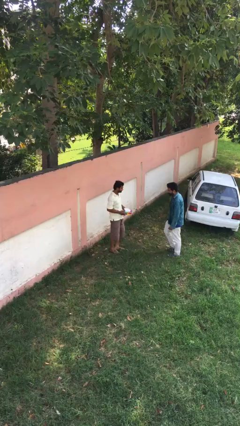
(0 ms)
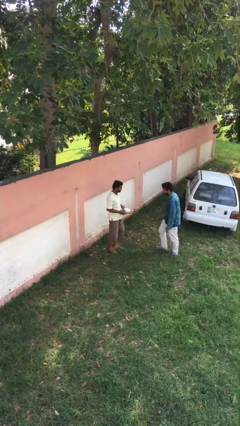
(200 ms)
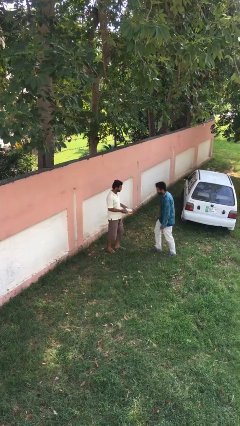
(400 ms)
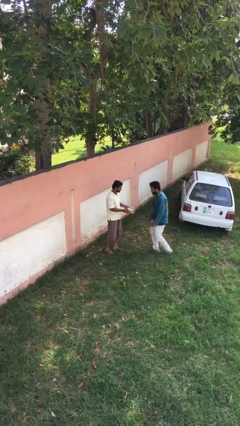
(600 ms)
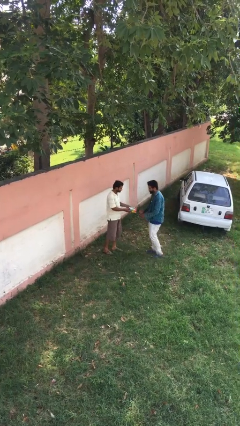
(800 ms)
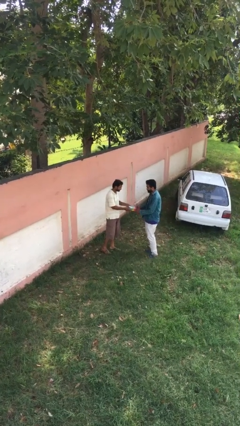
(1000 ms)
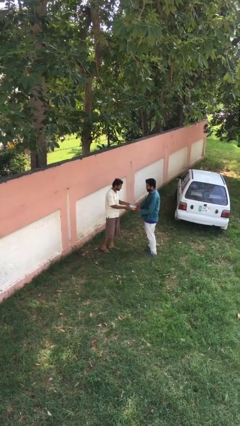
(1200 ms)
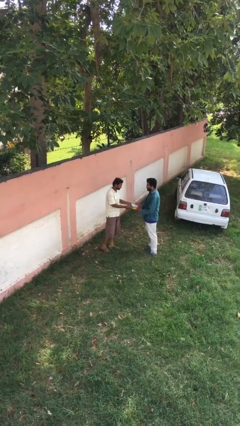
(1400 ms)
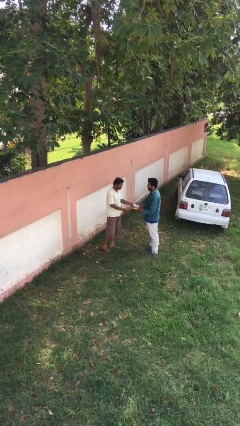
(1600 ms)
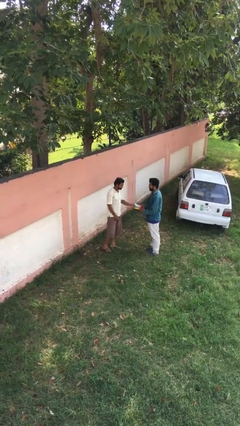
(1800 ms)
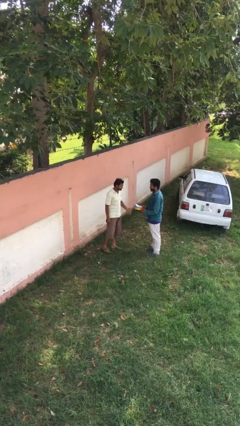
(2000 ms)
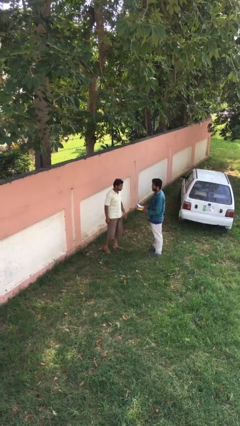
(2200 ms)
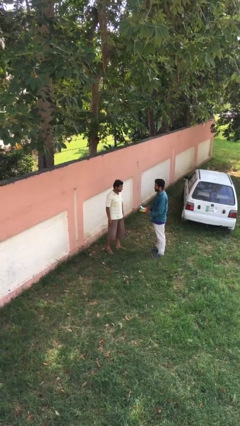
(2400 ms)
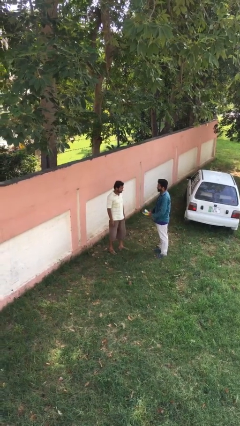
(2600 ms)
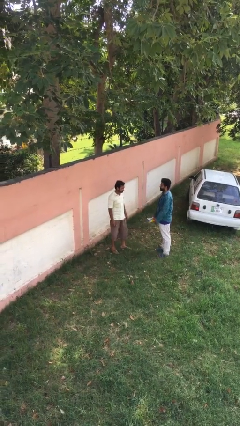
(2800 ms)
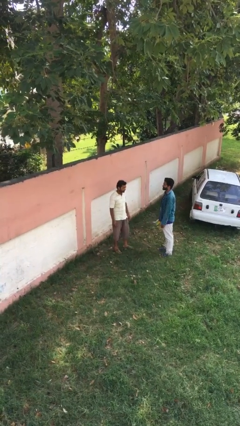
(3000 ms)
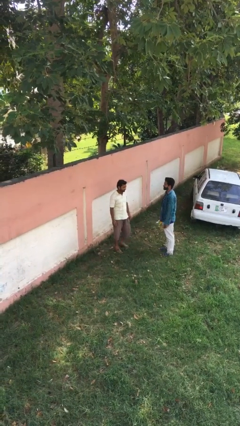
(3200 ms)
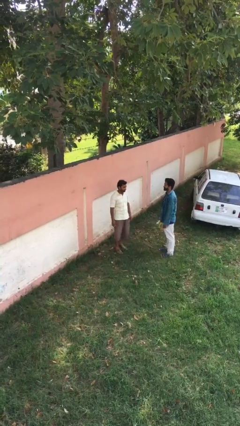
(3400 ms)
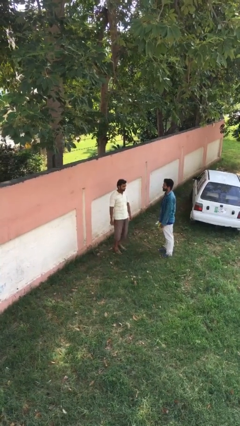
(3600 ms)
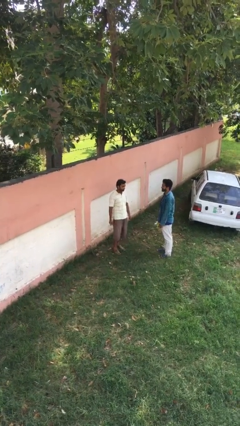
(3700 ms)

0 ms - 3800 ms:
person transfers object to person

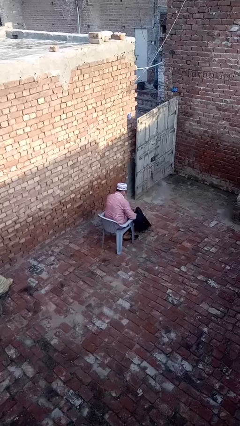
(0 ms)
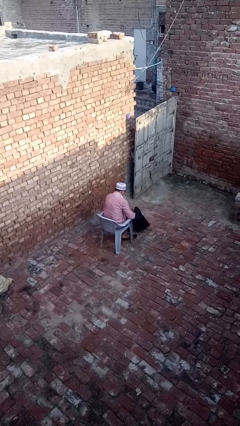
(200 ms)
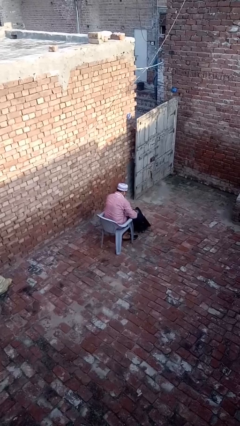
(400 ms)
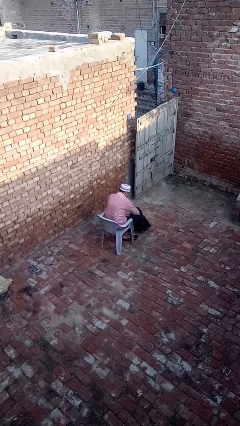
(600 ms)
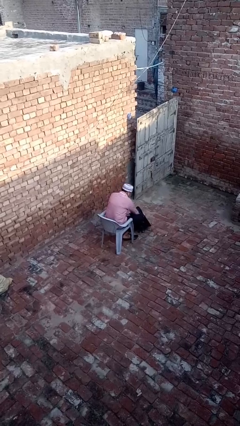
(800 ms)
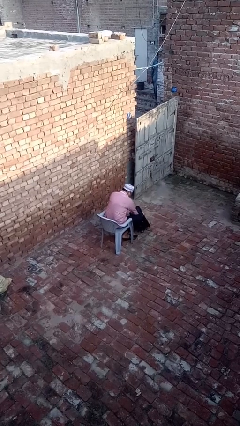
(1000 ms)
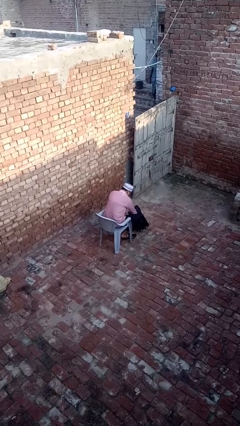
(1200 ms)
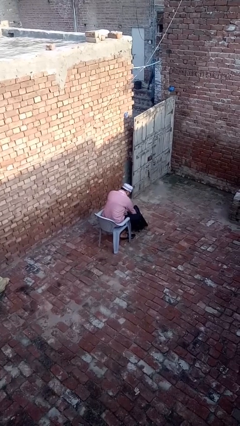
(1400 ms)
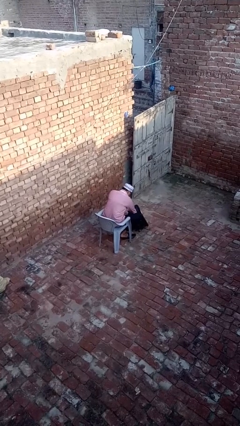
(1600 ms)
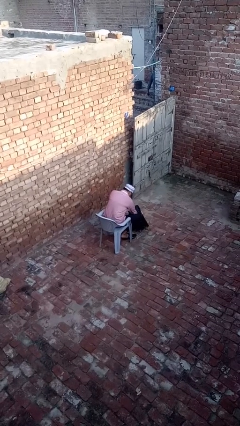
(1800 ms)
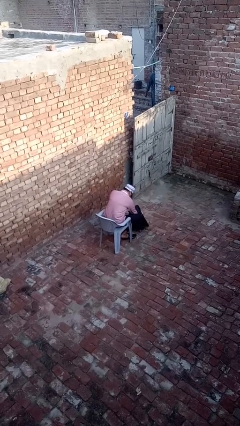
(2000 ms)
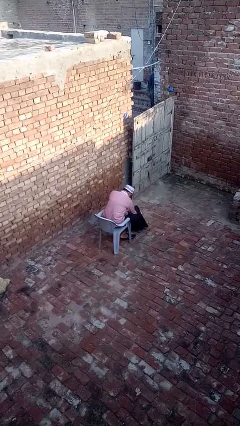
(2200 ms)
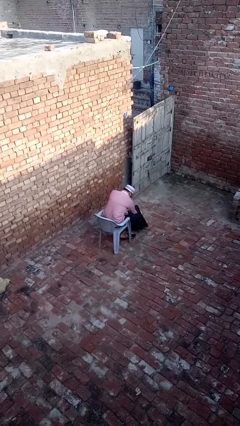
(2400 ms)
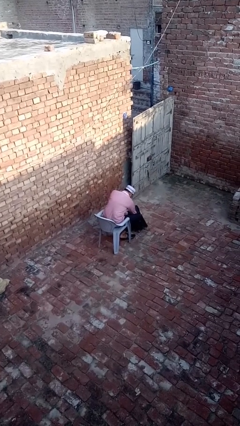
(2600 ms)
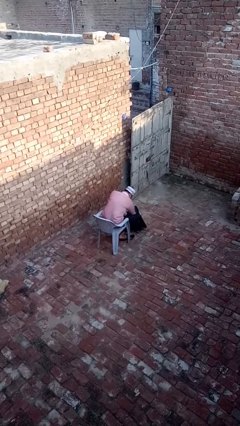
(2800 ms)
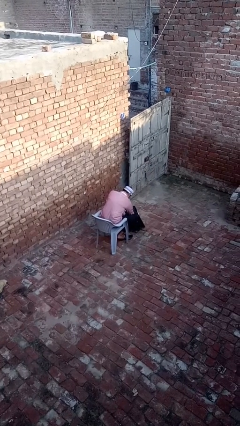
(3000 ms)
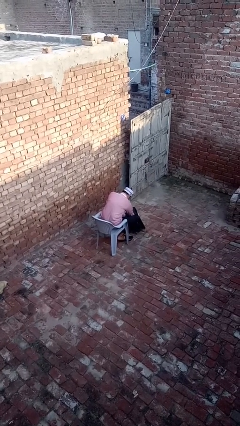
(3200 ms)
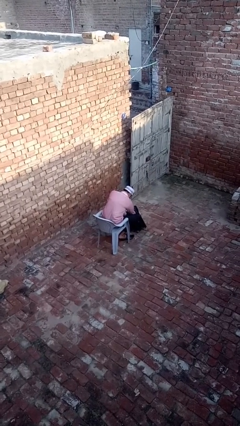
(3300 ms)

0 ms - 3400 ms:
person searches in backpack

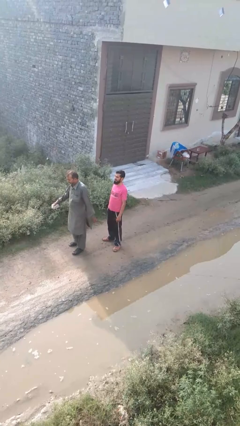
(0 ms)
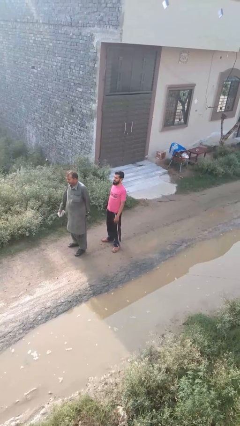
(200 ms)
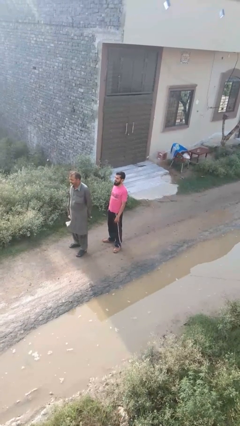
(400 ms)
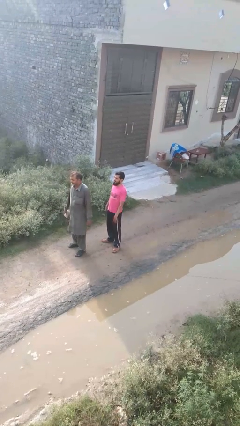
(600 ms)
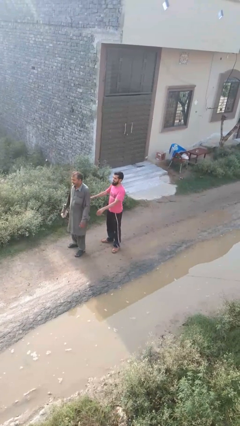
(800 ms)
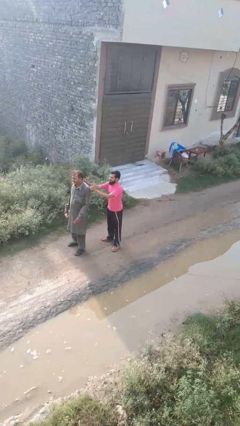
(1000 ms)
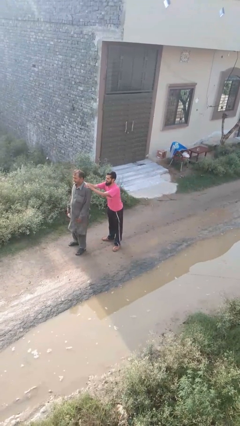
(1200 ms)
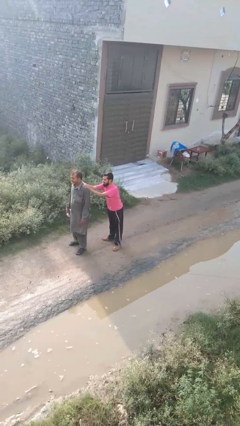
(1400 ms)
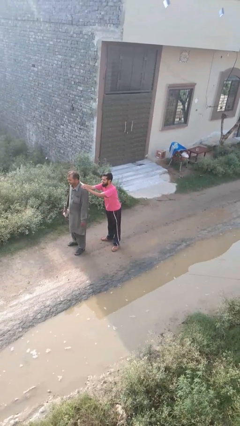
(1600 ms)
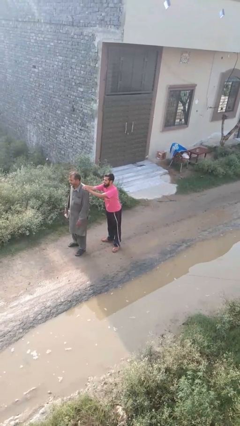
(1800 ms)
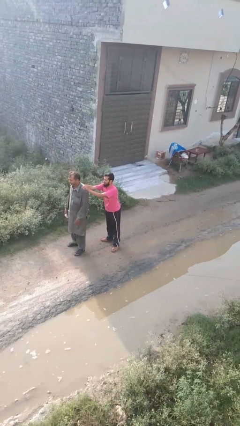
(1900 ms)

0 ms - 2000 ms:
person grabs person by shoulder

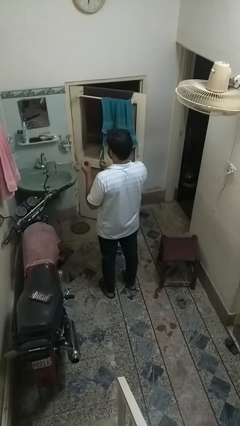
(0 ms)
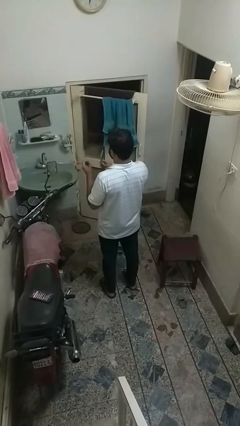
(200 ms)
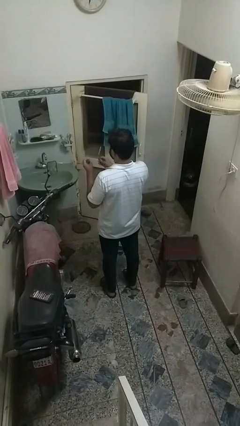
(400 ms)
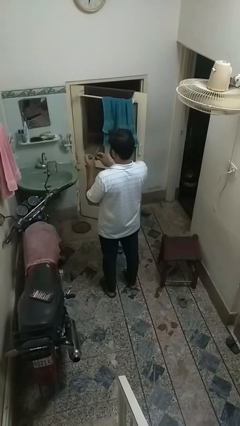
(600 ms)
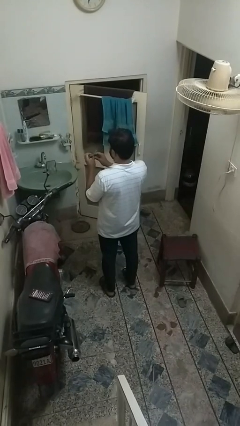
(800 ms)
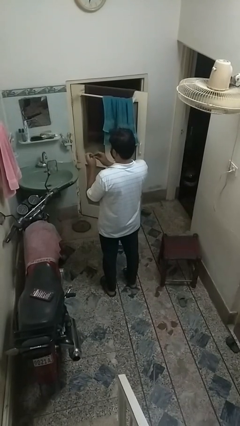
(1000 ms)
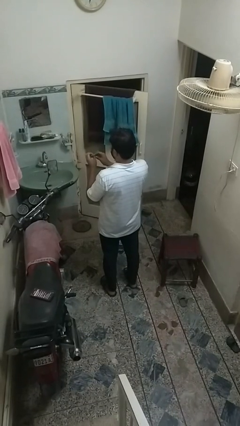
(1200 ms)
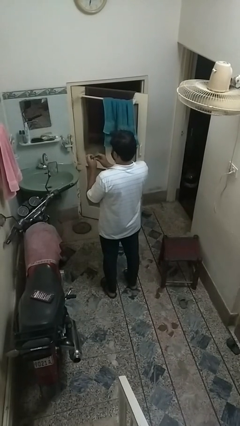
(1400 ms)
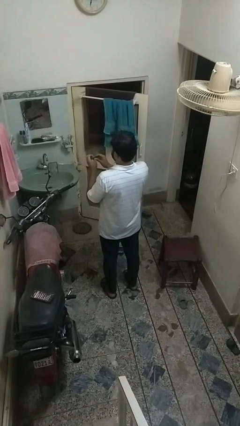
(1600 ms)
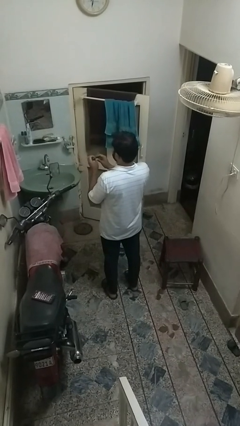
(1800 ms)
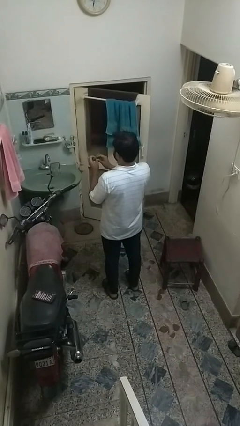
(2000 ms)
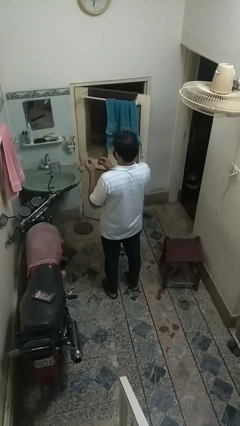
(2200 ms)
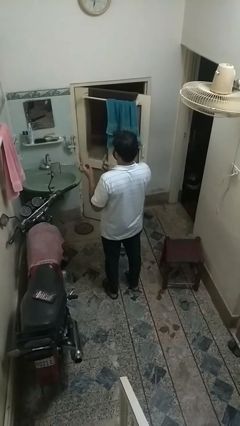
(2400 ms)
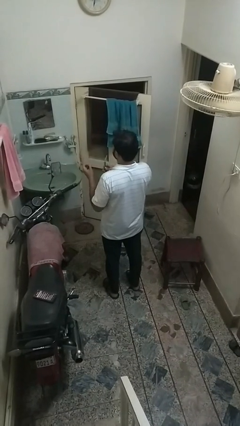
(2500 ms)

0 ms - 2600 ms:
person files fingernails

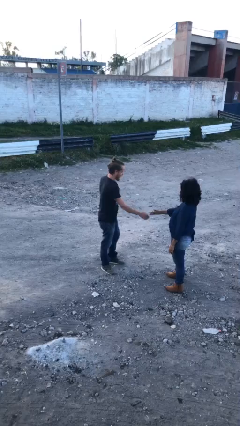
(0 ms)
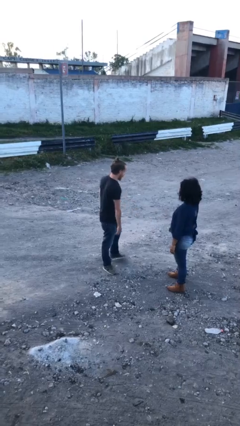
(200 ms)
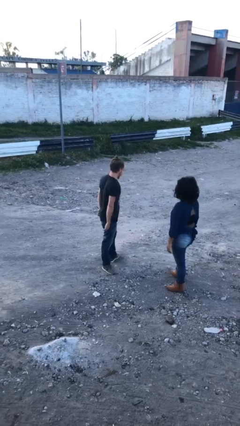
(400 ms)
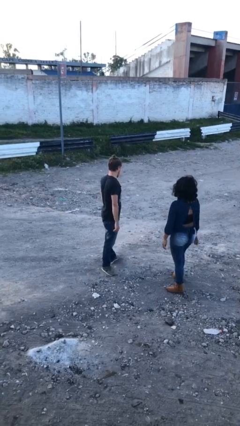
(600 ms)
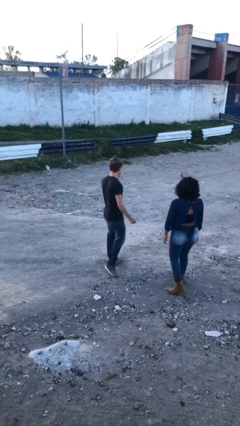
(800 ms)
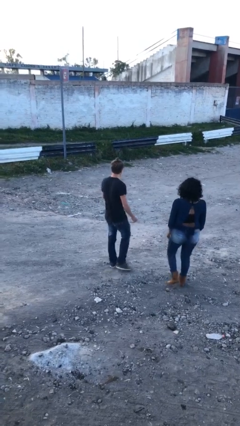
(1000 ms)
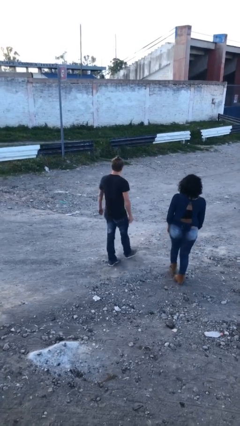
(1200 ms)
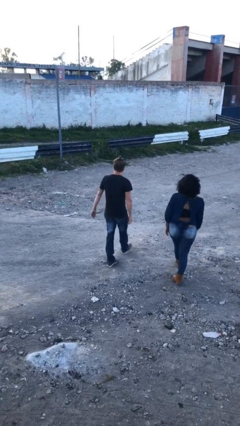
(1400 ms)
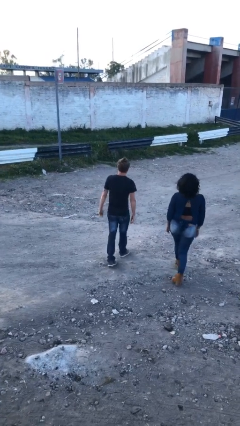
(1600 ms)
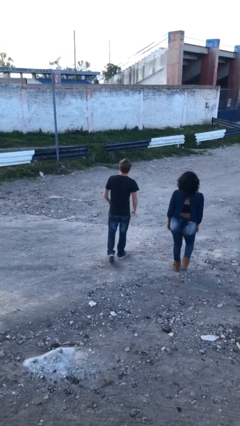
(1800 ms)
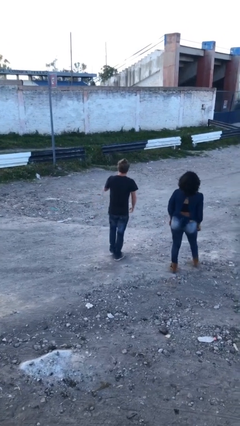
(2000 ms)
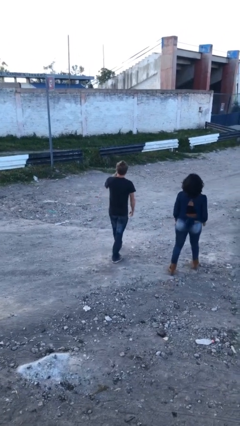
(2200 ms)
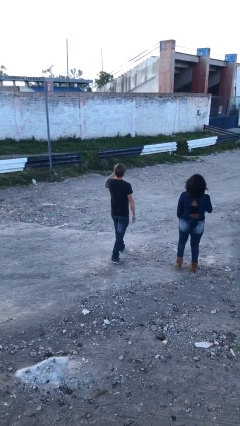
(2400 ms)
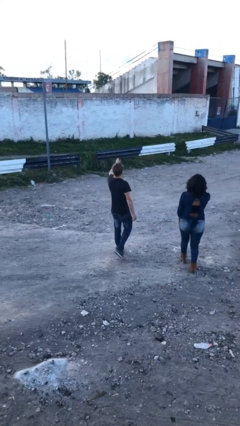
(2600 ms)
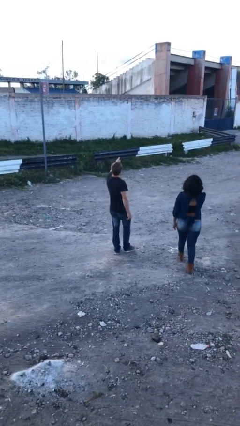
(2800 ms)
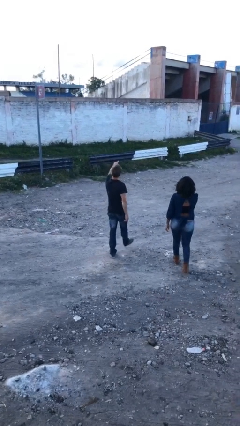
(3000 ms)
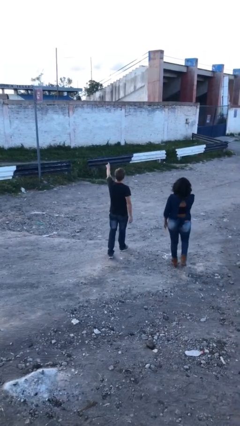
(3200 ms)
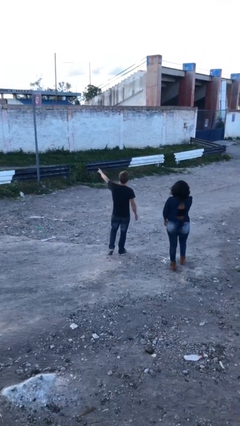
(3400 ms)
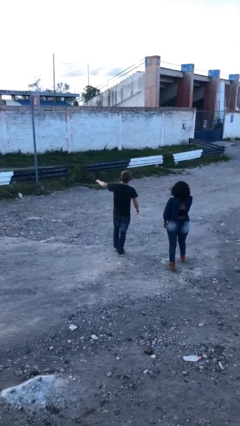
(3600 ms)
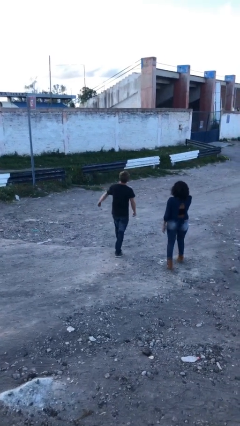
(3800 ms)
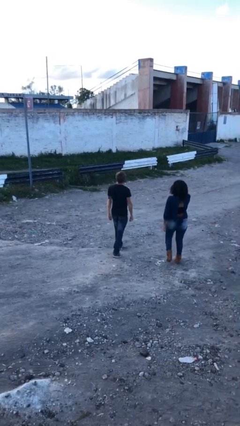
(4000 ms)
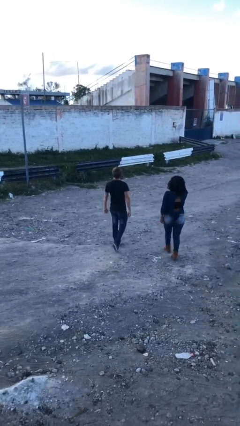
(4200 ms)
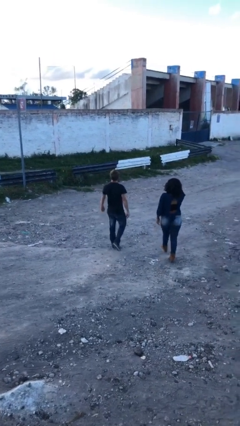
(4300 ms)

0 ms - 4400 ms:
person talks to person

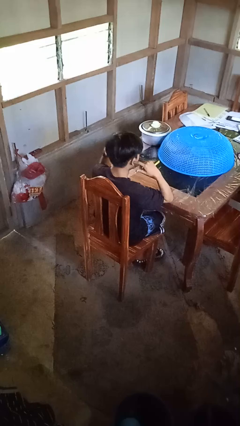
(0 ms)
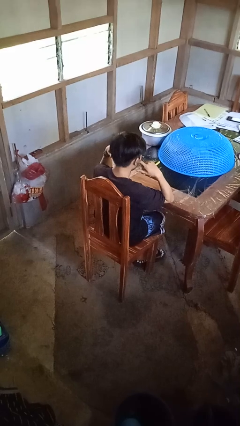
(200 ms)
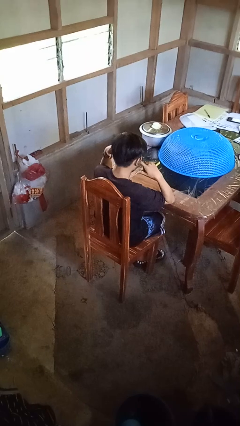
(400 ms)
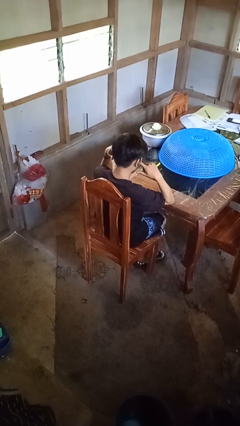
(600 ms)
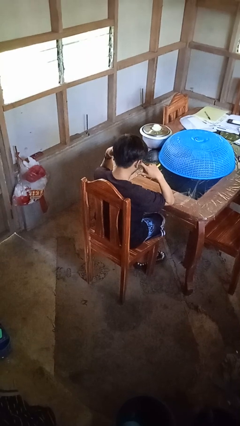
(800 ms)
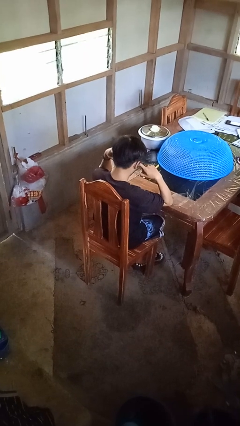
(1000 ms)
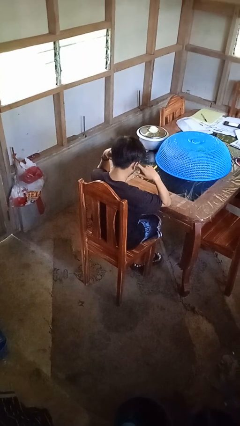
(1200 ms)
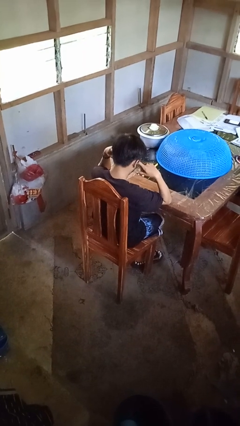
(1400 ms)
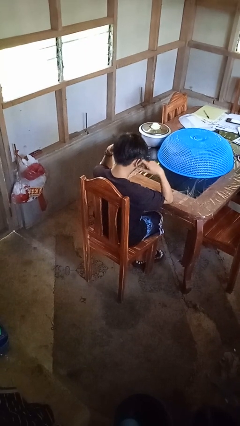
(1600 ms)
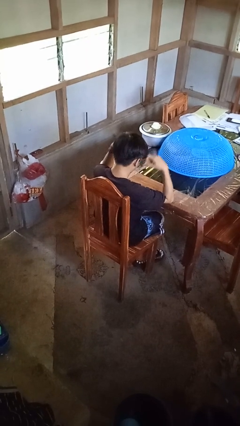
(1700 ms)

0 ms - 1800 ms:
person puts fingers in ear
